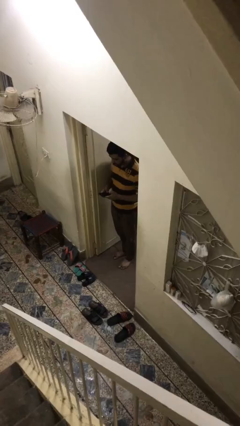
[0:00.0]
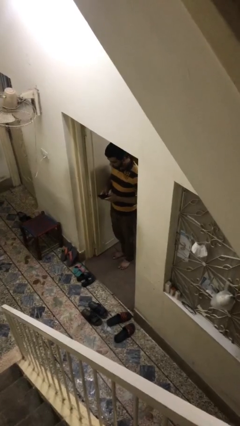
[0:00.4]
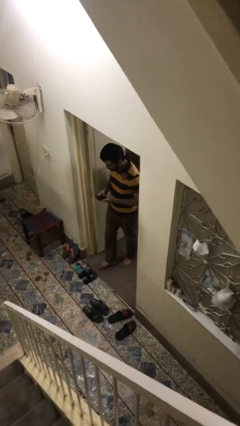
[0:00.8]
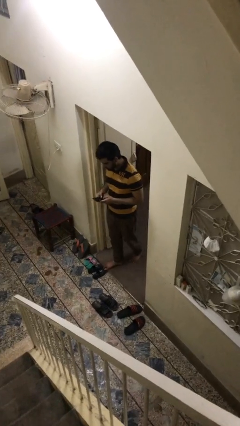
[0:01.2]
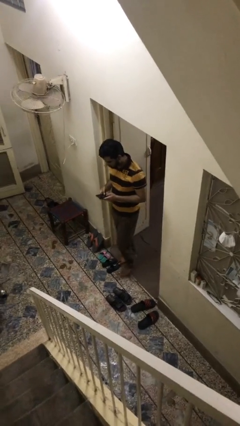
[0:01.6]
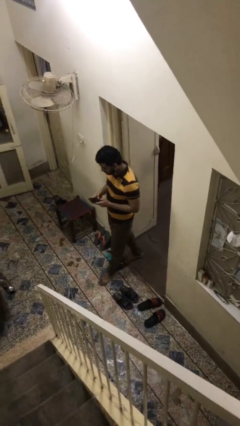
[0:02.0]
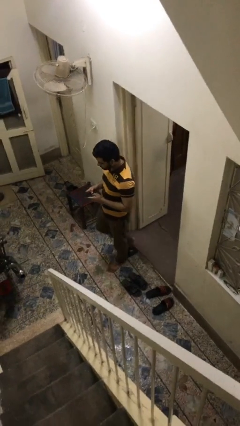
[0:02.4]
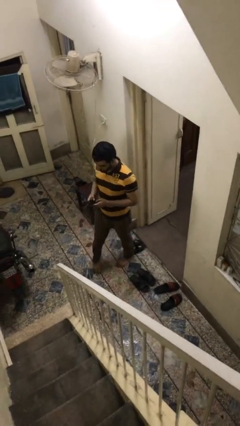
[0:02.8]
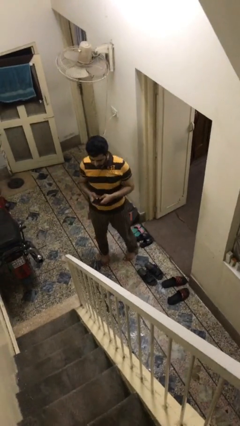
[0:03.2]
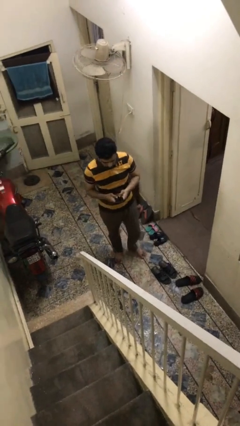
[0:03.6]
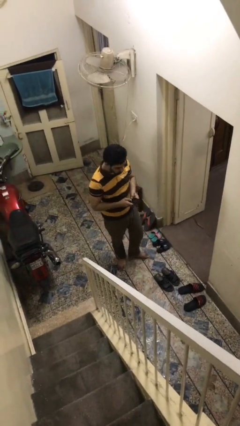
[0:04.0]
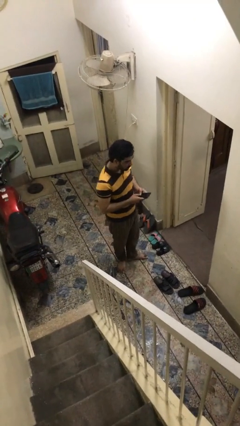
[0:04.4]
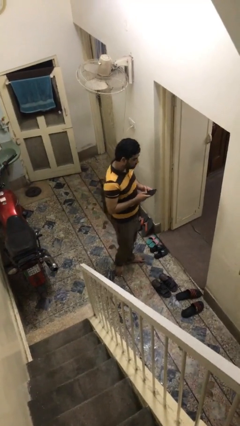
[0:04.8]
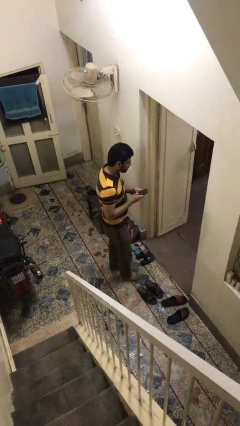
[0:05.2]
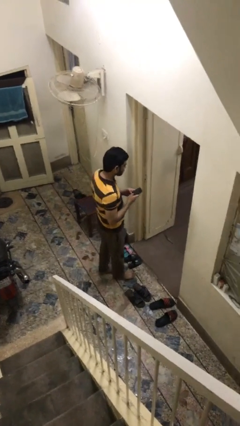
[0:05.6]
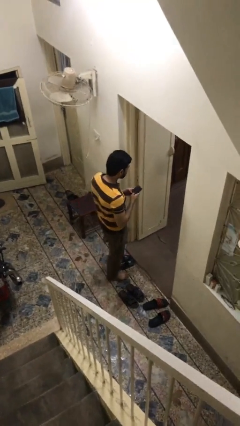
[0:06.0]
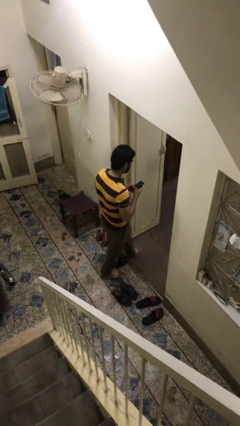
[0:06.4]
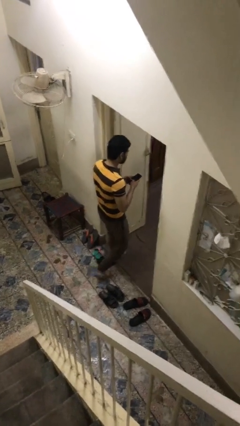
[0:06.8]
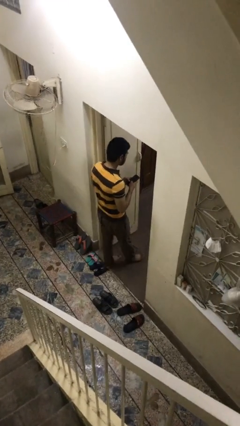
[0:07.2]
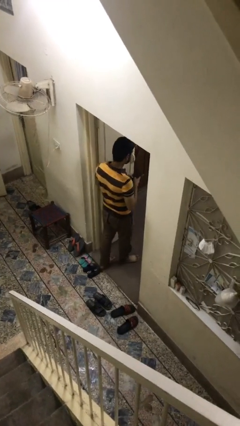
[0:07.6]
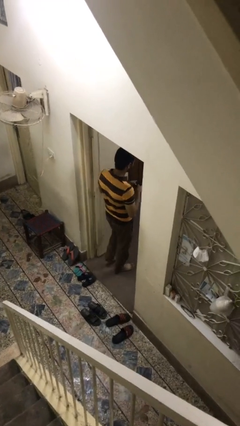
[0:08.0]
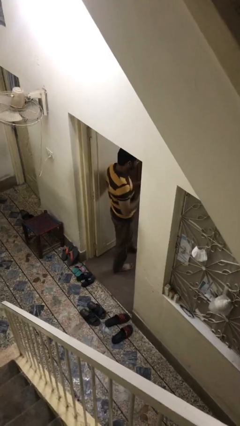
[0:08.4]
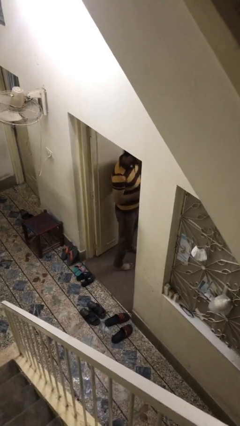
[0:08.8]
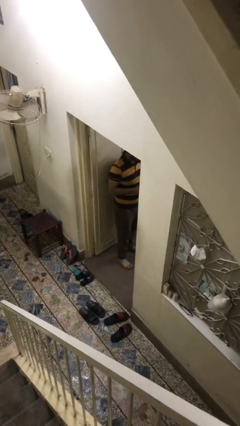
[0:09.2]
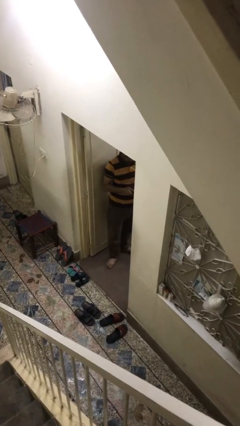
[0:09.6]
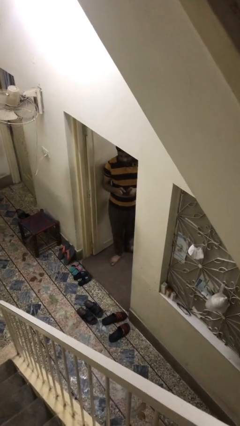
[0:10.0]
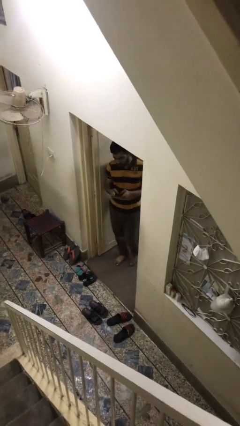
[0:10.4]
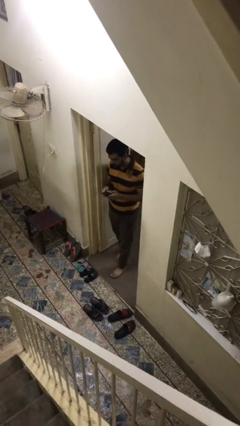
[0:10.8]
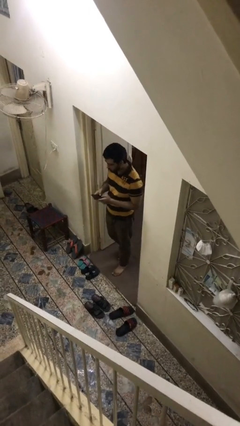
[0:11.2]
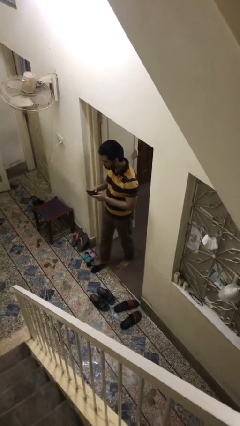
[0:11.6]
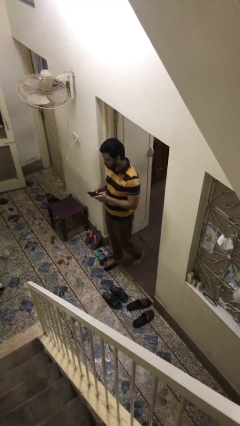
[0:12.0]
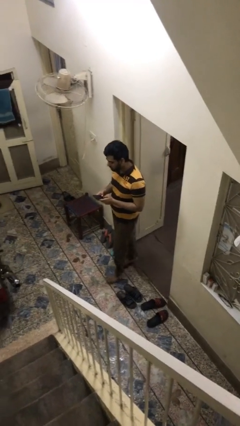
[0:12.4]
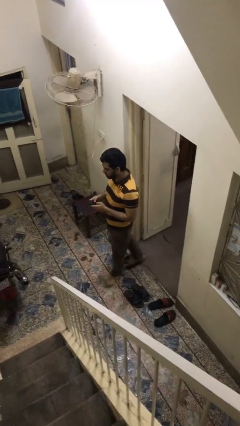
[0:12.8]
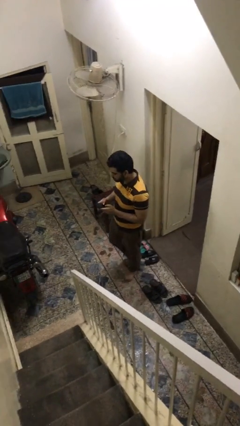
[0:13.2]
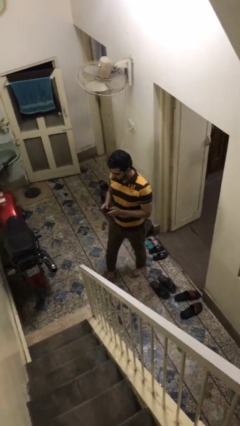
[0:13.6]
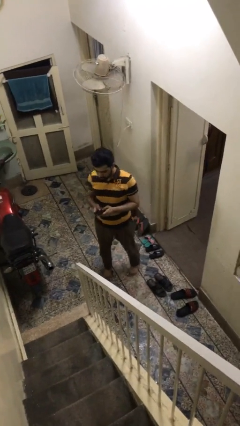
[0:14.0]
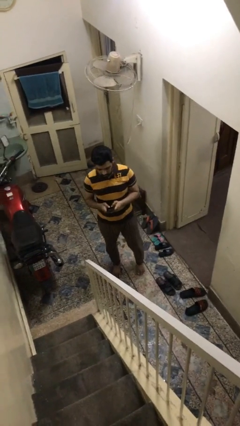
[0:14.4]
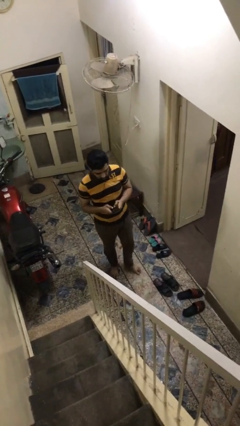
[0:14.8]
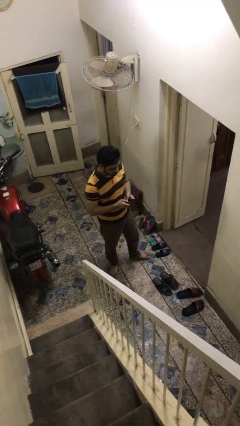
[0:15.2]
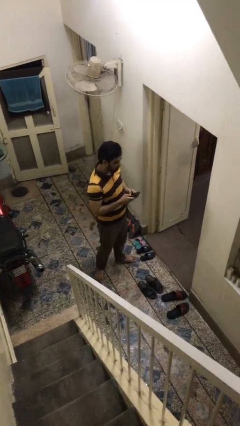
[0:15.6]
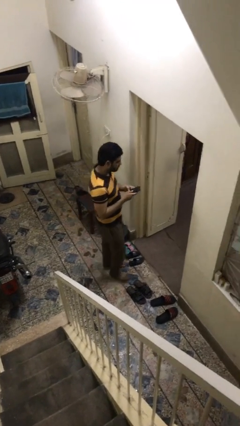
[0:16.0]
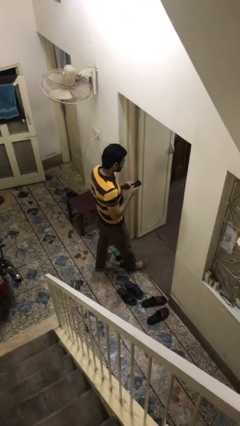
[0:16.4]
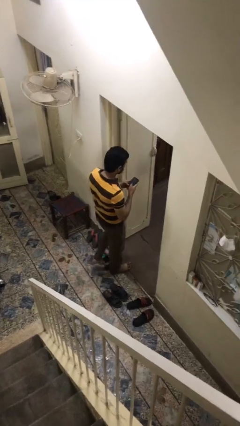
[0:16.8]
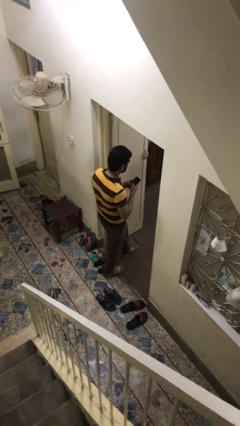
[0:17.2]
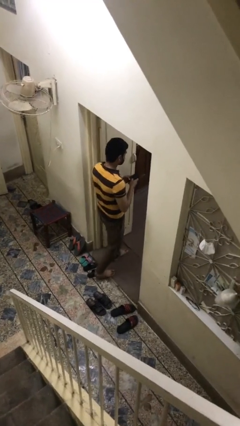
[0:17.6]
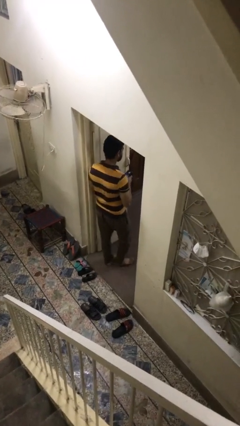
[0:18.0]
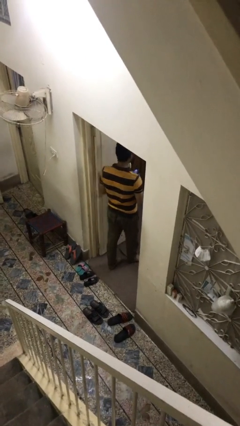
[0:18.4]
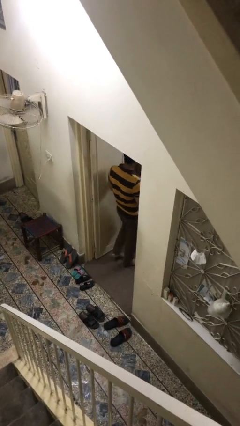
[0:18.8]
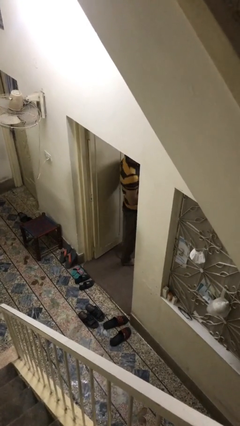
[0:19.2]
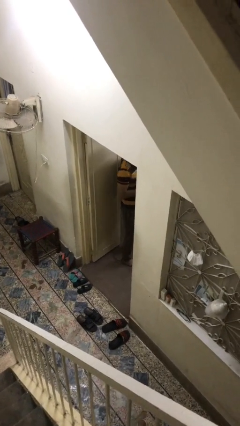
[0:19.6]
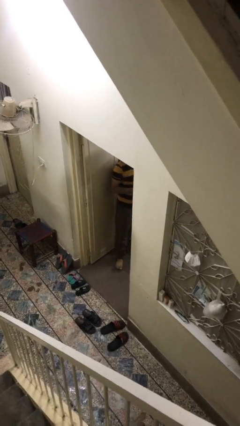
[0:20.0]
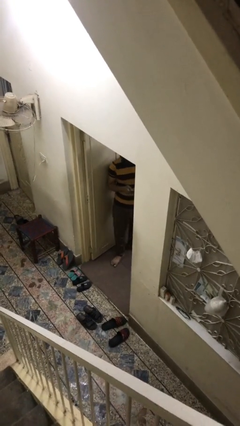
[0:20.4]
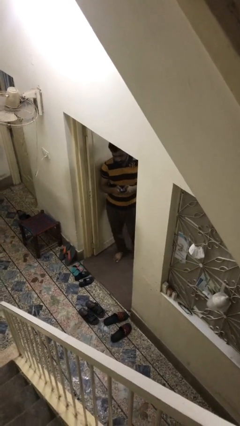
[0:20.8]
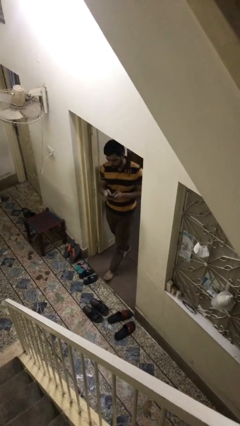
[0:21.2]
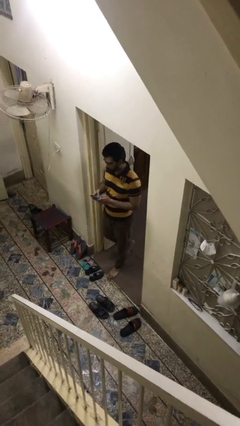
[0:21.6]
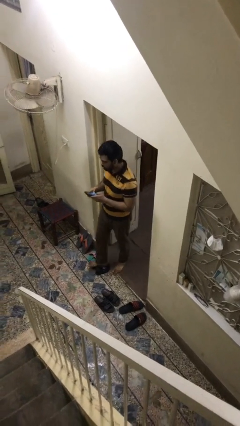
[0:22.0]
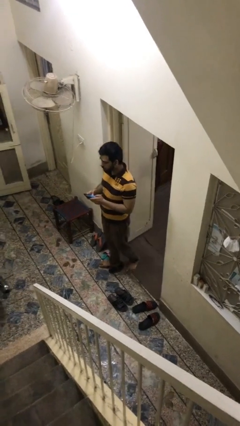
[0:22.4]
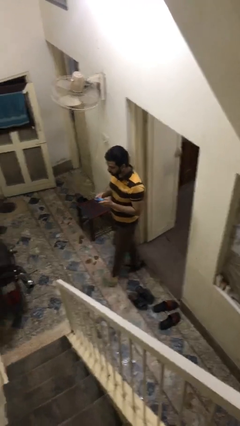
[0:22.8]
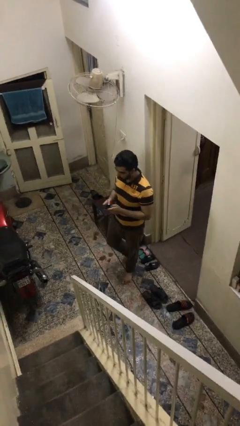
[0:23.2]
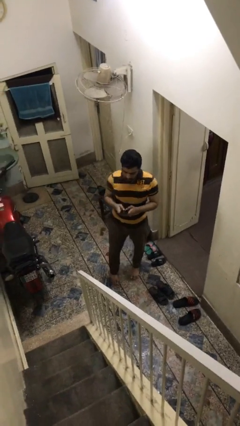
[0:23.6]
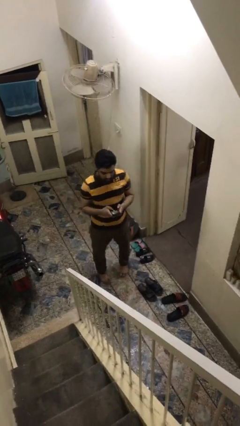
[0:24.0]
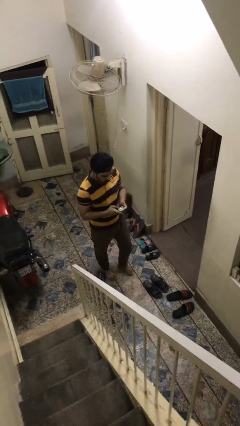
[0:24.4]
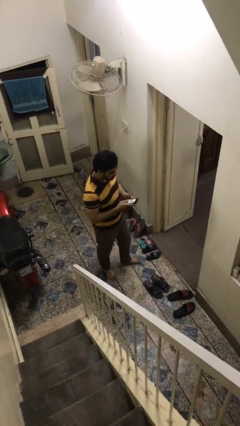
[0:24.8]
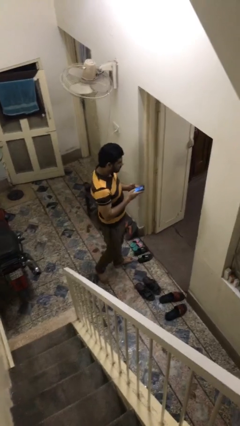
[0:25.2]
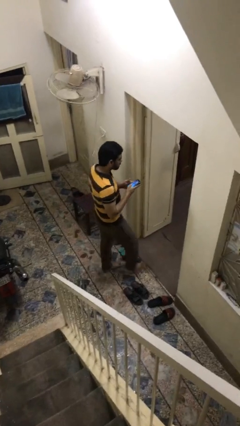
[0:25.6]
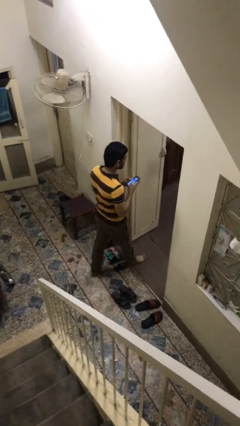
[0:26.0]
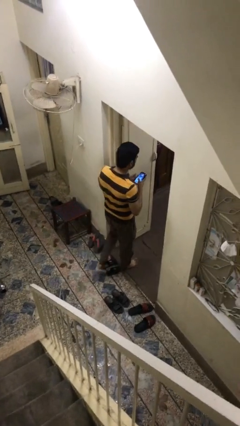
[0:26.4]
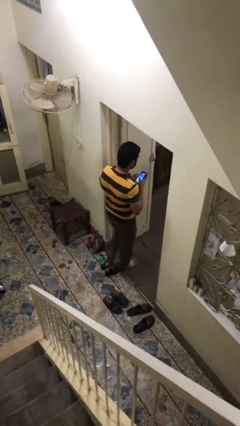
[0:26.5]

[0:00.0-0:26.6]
person texts on phone

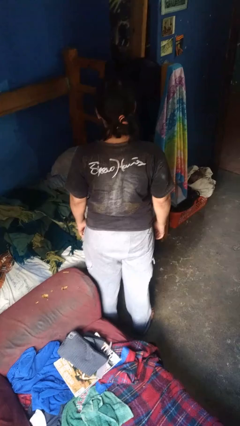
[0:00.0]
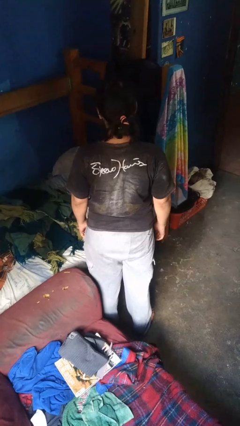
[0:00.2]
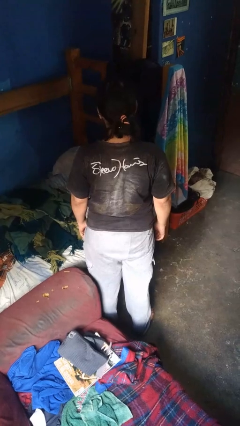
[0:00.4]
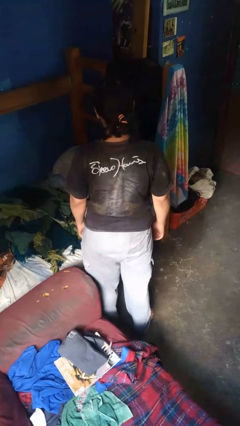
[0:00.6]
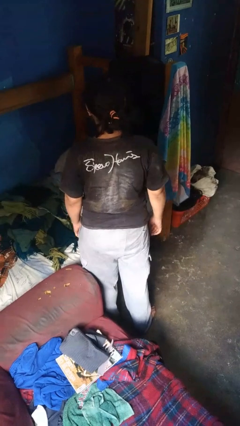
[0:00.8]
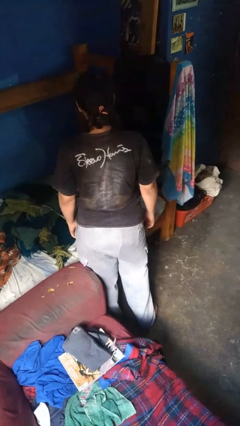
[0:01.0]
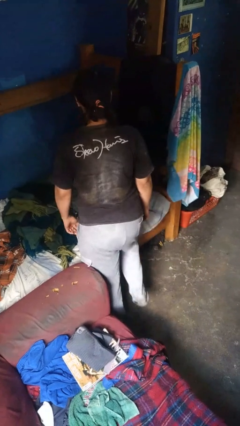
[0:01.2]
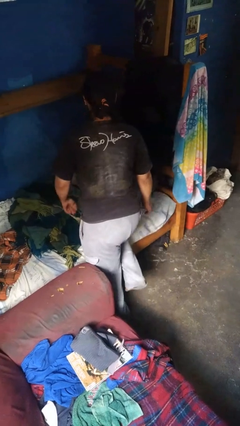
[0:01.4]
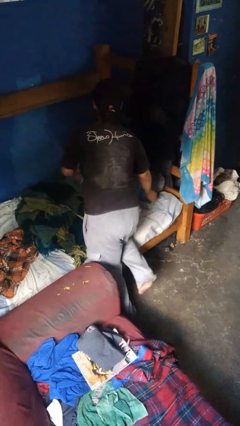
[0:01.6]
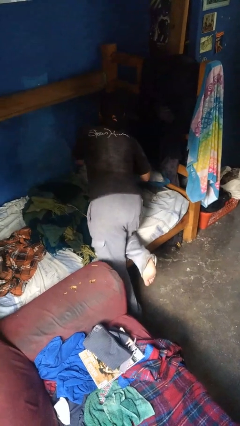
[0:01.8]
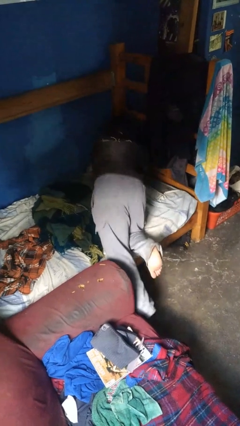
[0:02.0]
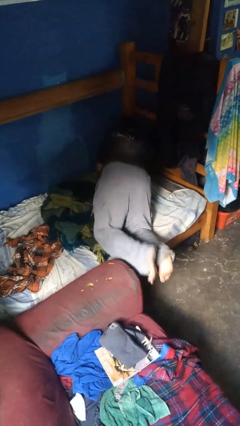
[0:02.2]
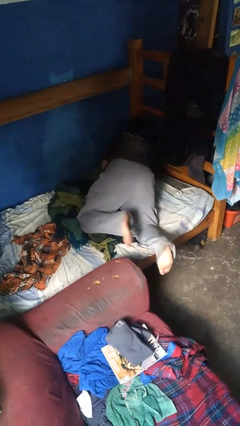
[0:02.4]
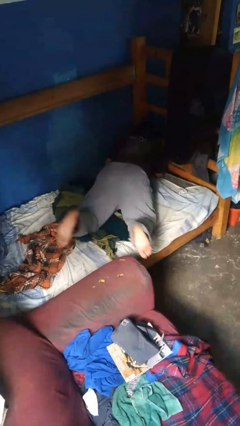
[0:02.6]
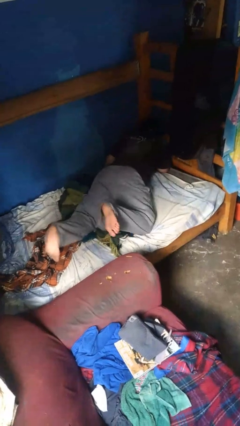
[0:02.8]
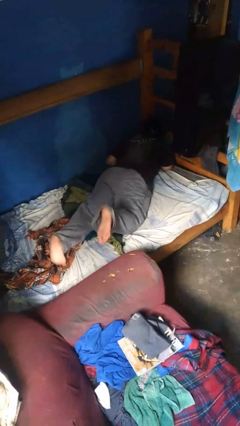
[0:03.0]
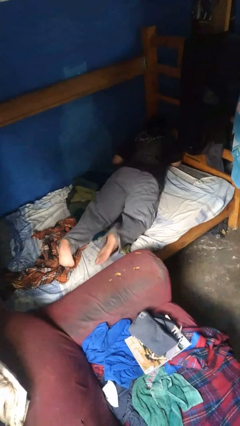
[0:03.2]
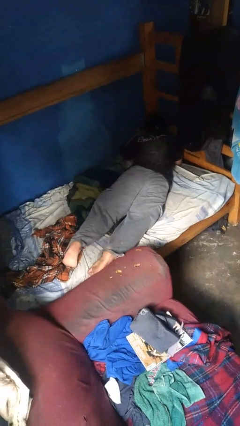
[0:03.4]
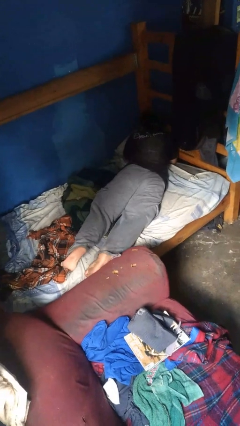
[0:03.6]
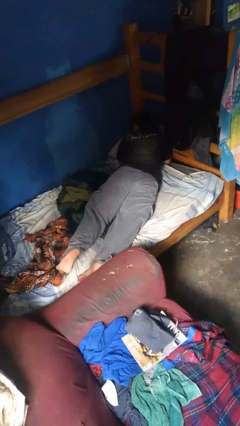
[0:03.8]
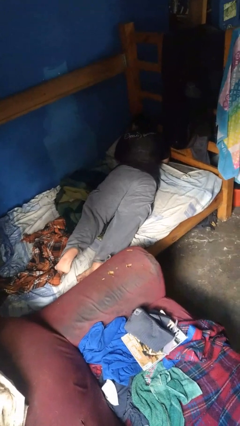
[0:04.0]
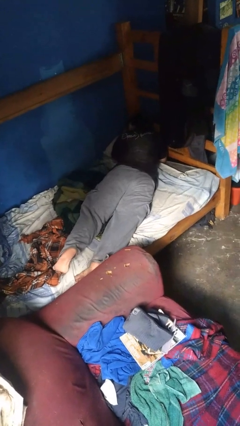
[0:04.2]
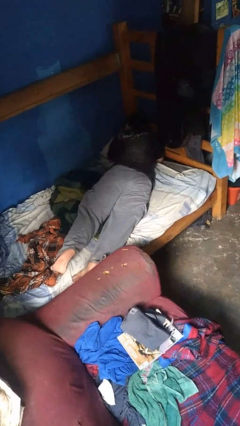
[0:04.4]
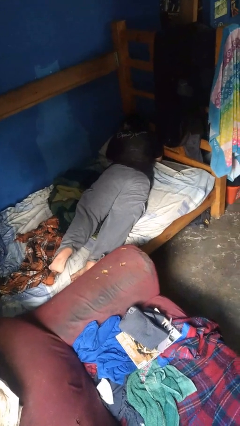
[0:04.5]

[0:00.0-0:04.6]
person lies down on bed

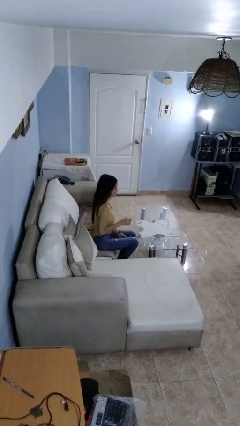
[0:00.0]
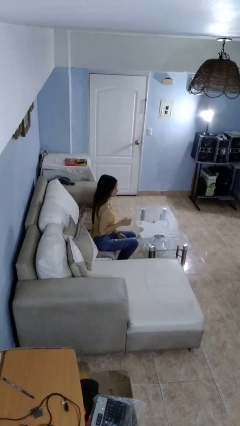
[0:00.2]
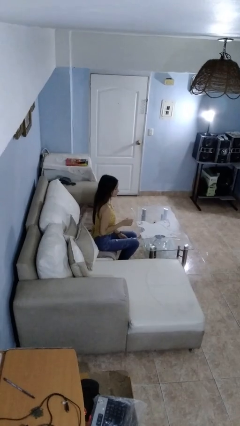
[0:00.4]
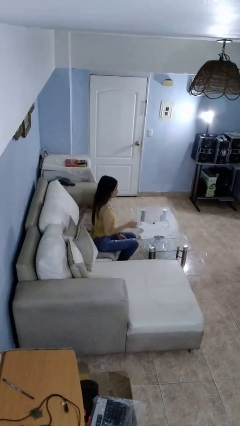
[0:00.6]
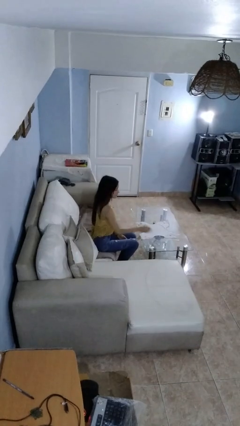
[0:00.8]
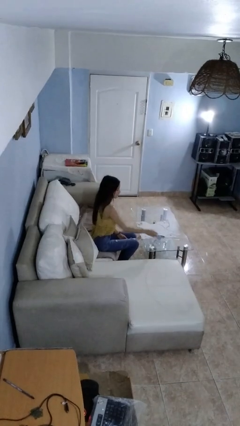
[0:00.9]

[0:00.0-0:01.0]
person puts down object on table
